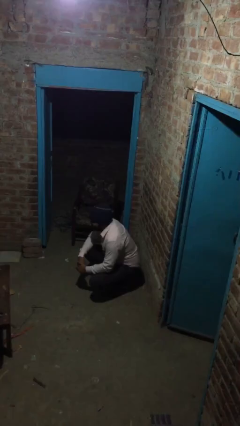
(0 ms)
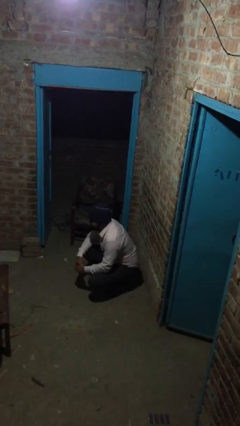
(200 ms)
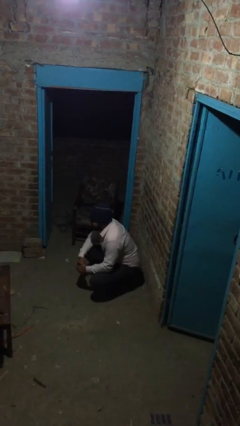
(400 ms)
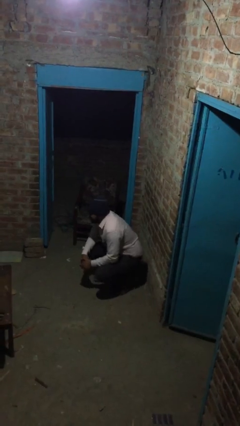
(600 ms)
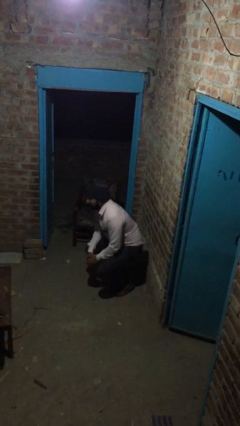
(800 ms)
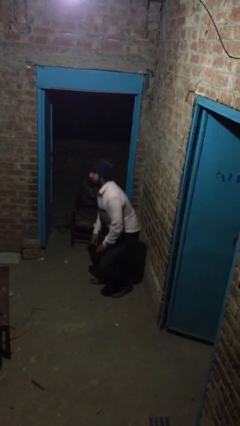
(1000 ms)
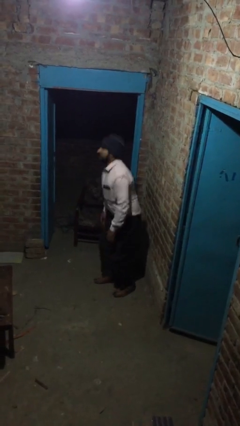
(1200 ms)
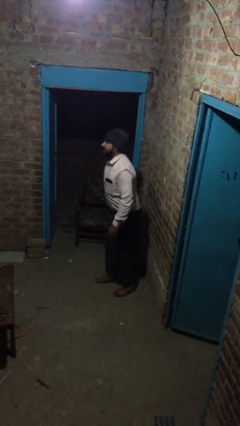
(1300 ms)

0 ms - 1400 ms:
person stands up

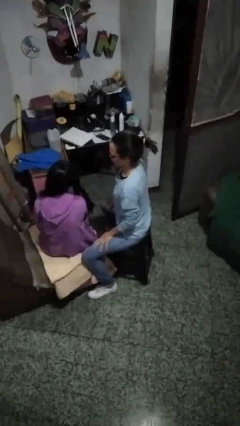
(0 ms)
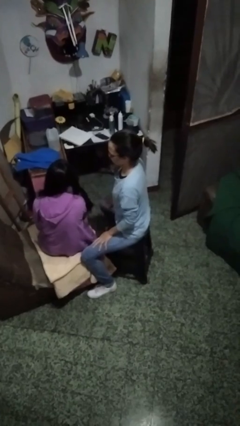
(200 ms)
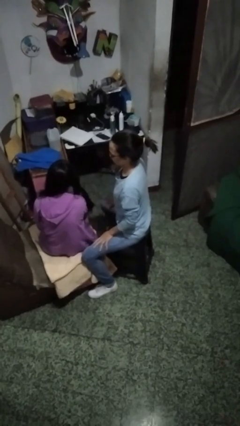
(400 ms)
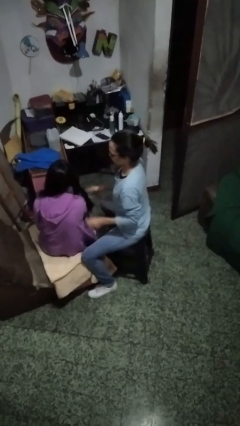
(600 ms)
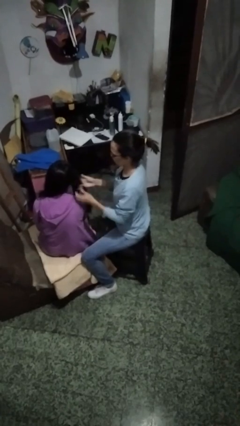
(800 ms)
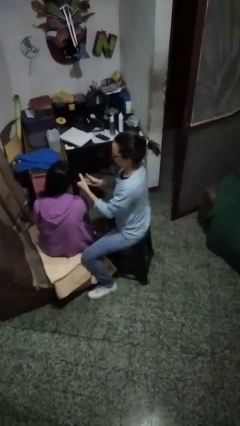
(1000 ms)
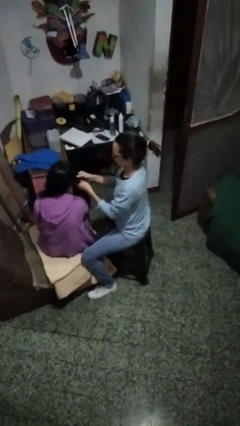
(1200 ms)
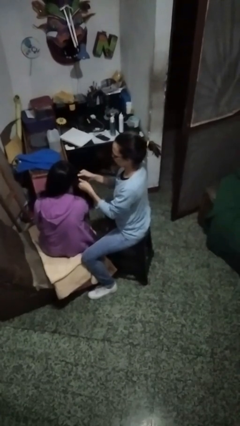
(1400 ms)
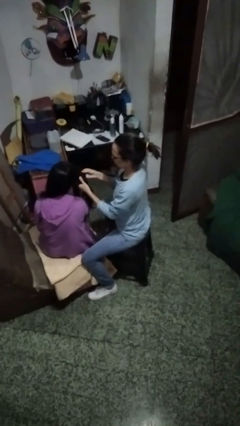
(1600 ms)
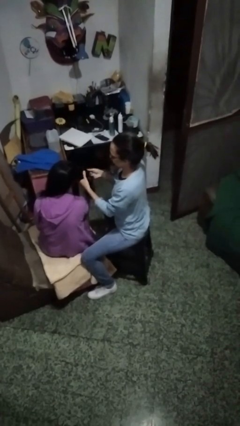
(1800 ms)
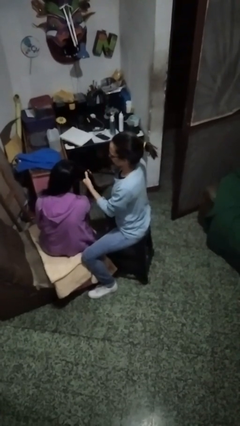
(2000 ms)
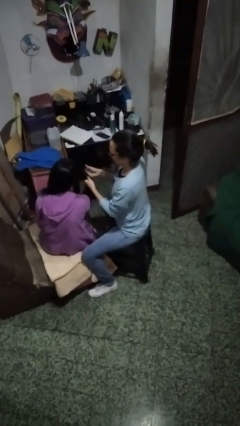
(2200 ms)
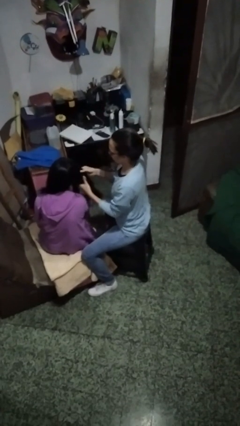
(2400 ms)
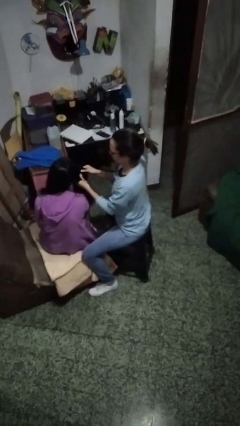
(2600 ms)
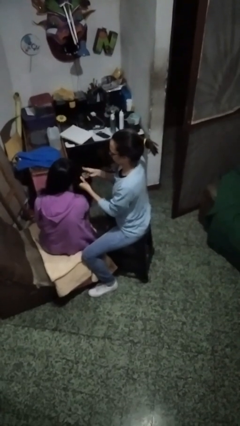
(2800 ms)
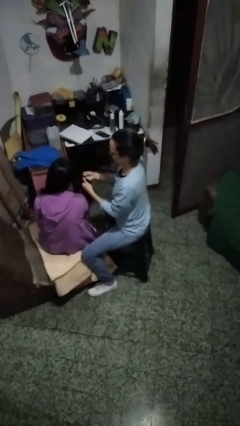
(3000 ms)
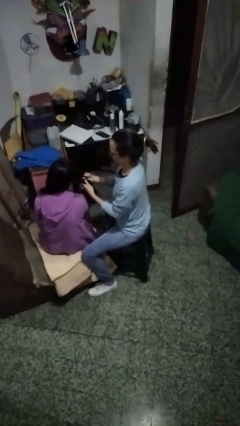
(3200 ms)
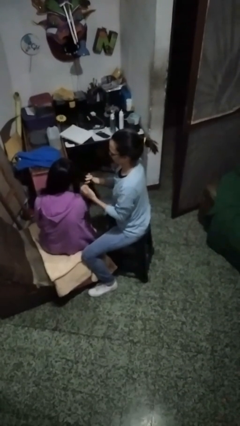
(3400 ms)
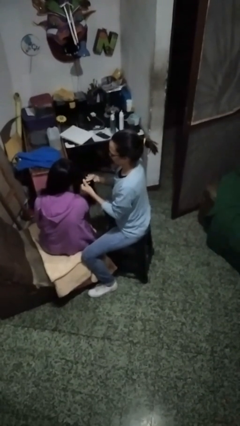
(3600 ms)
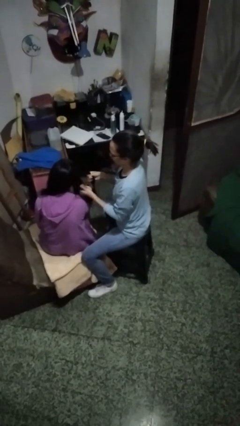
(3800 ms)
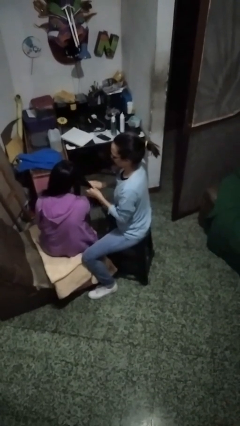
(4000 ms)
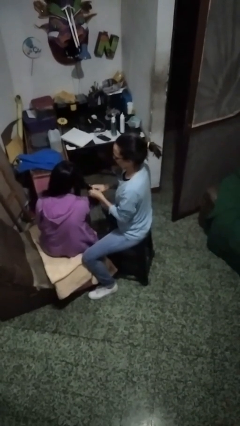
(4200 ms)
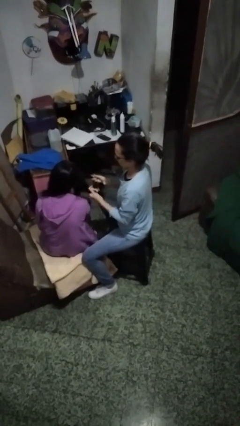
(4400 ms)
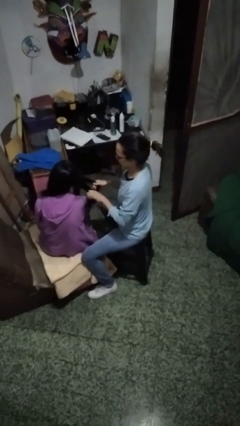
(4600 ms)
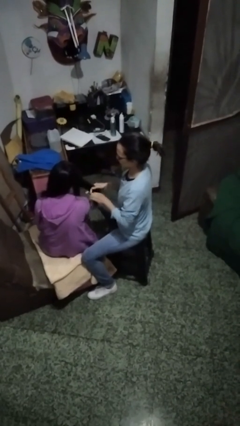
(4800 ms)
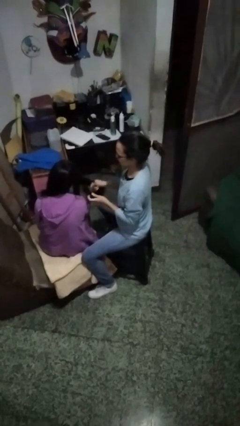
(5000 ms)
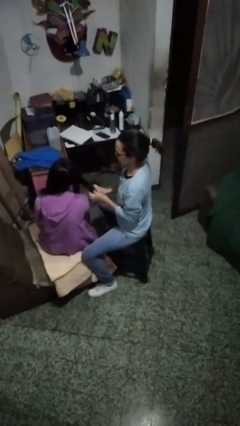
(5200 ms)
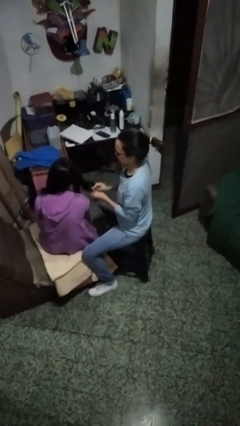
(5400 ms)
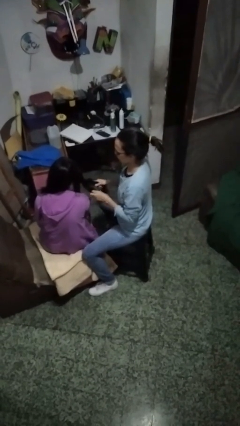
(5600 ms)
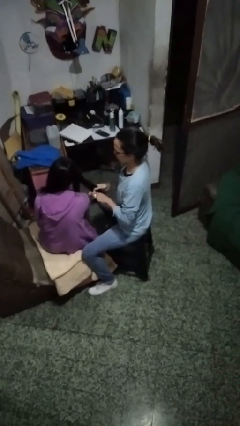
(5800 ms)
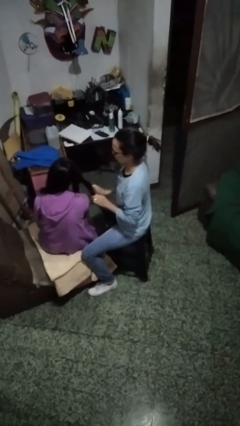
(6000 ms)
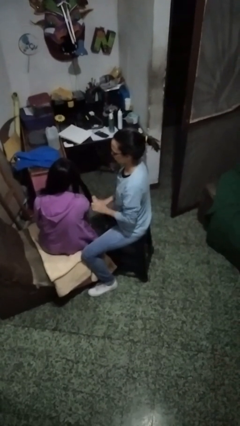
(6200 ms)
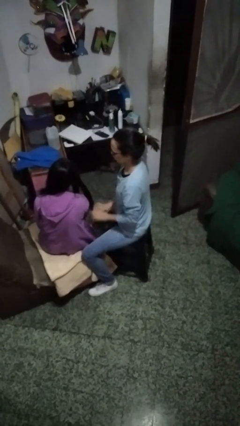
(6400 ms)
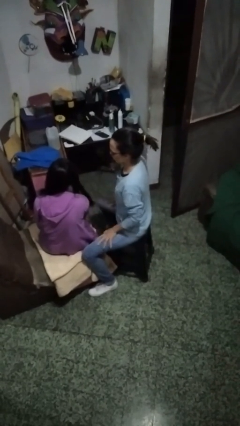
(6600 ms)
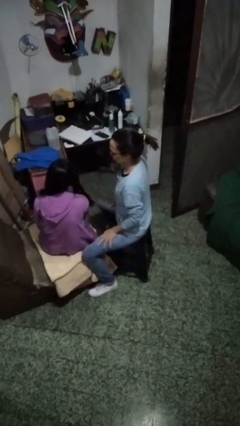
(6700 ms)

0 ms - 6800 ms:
person braids hair of person

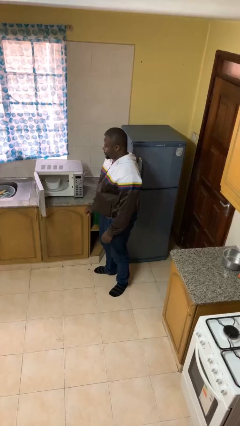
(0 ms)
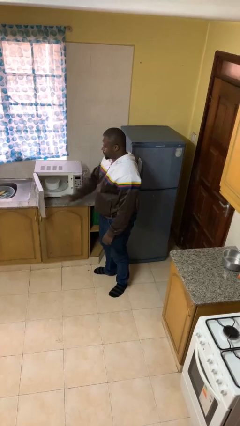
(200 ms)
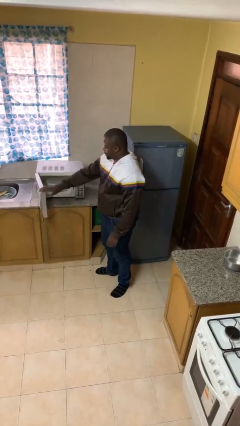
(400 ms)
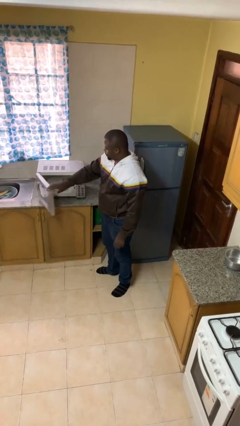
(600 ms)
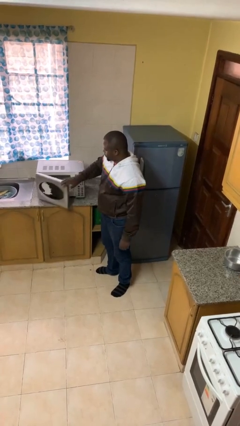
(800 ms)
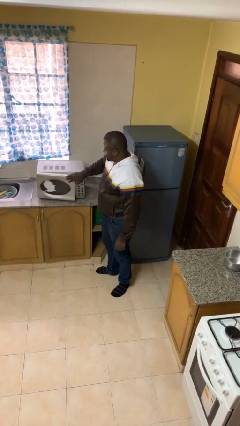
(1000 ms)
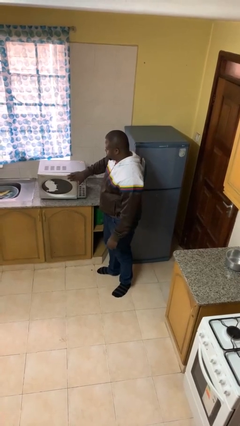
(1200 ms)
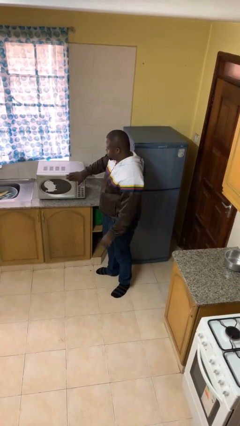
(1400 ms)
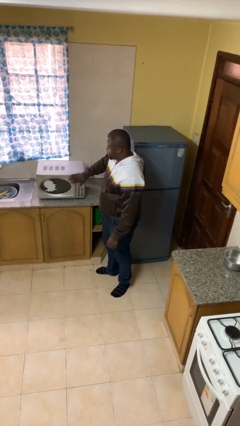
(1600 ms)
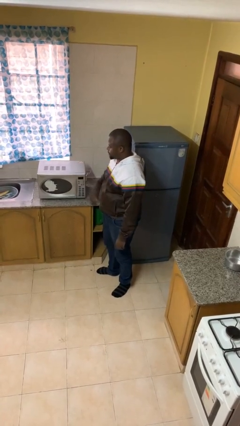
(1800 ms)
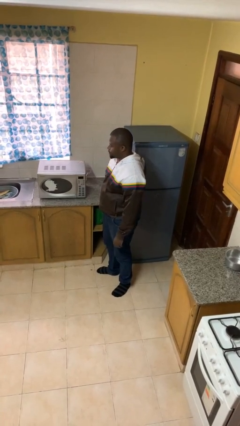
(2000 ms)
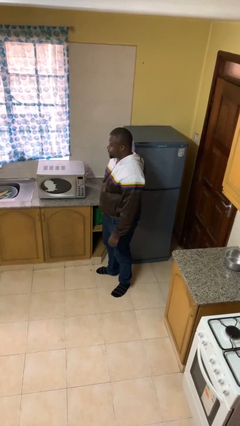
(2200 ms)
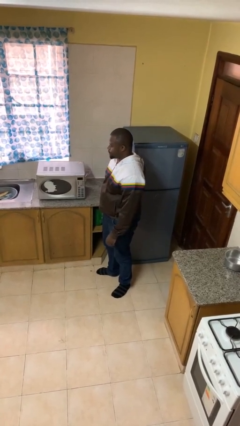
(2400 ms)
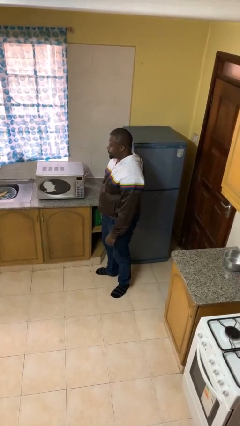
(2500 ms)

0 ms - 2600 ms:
person closes microwave

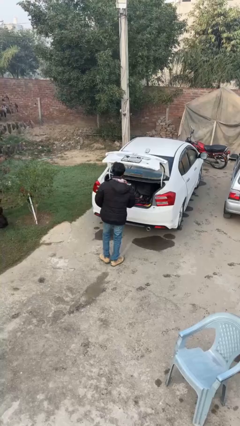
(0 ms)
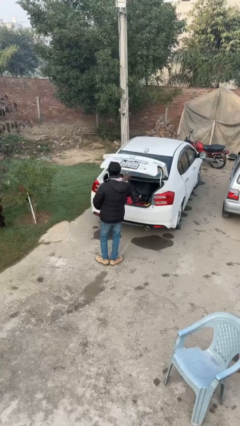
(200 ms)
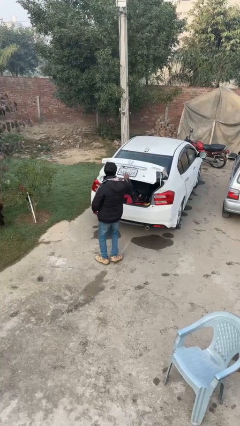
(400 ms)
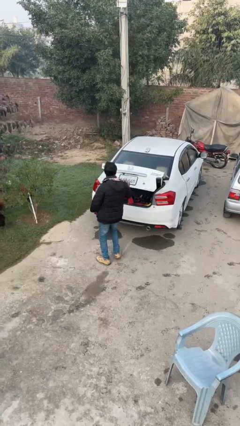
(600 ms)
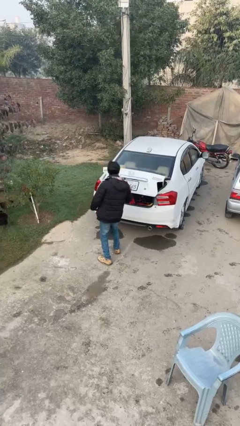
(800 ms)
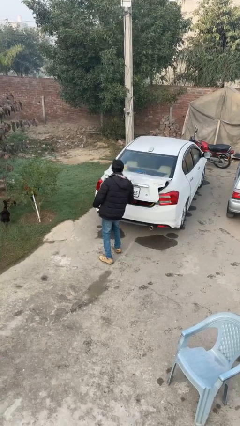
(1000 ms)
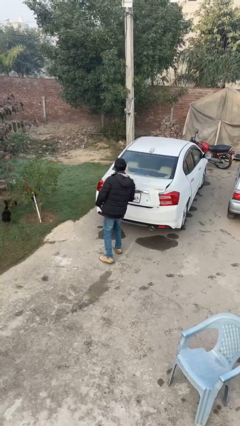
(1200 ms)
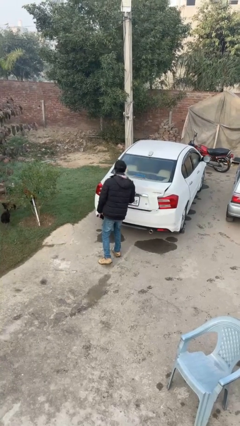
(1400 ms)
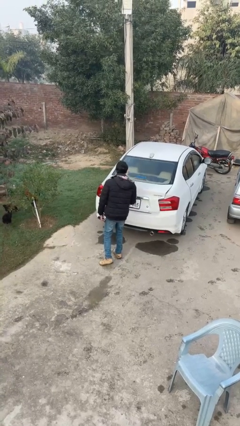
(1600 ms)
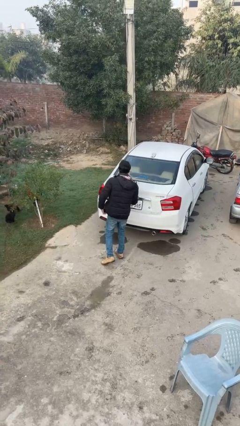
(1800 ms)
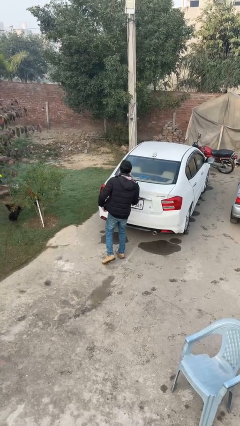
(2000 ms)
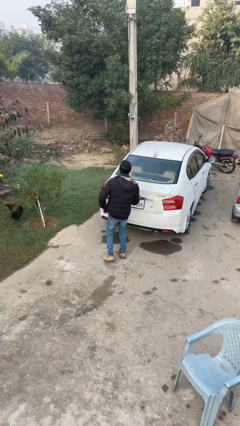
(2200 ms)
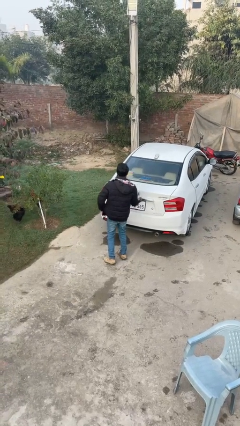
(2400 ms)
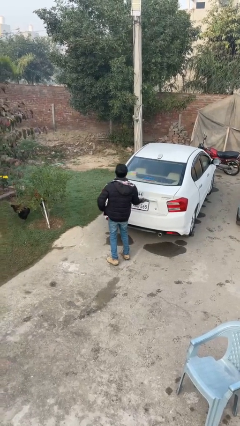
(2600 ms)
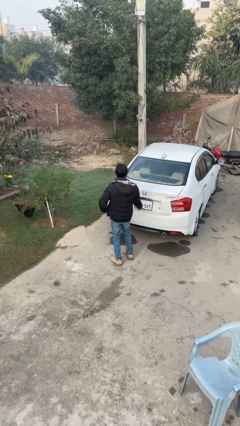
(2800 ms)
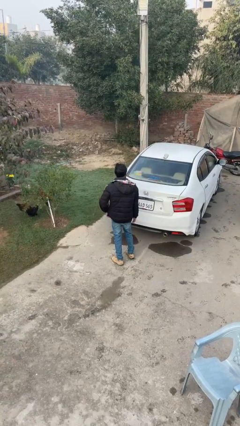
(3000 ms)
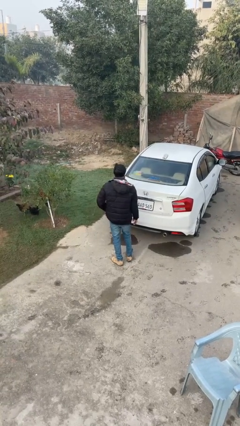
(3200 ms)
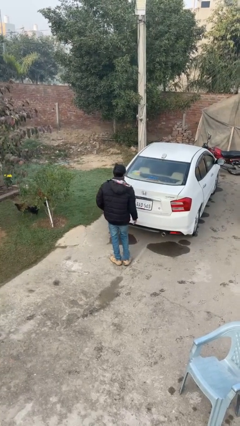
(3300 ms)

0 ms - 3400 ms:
person closes car trunk

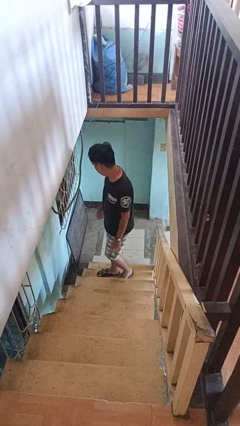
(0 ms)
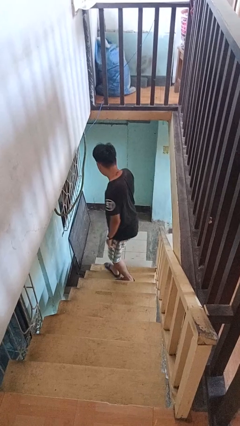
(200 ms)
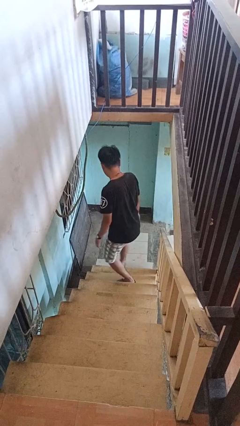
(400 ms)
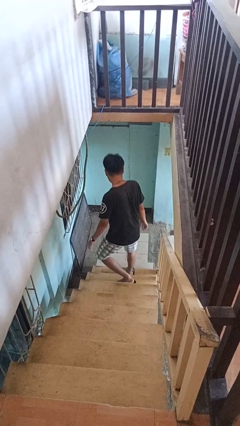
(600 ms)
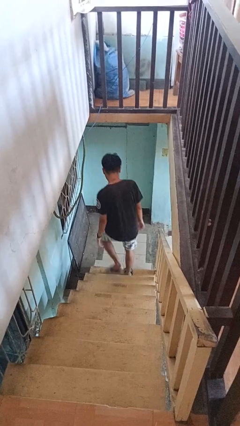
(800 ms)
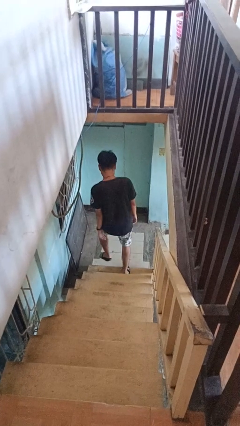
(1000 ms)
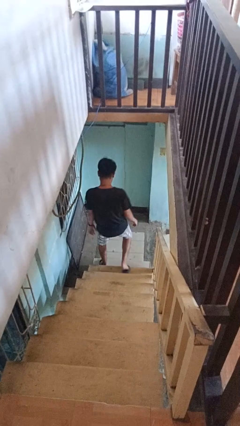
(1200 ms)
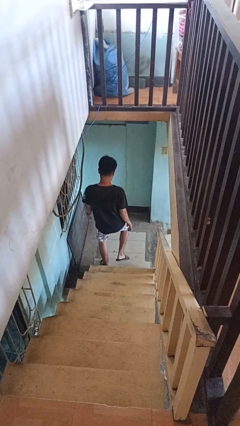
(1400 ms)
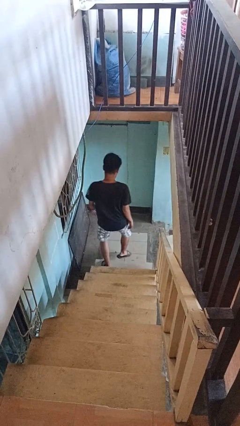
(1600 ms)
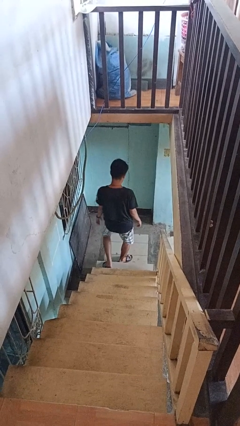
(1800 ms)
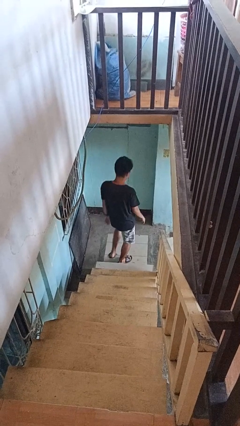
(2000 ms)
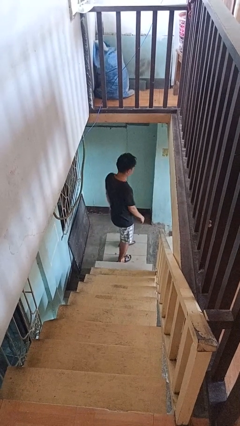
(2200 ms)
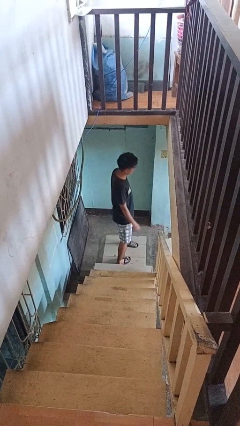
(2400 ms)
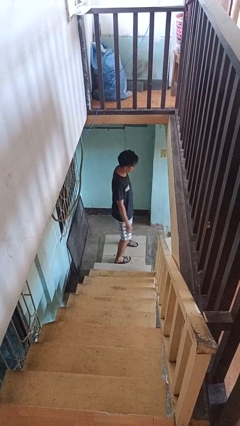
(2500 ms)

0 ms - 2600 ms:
person climbs down ladder

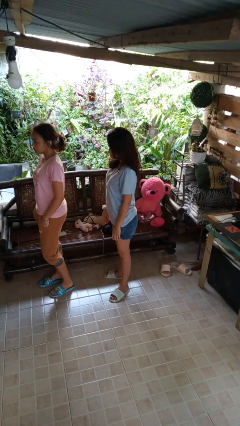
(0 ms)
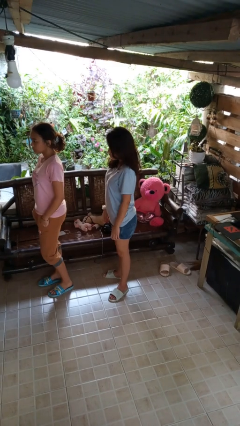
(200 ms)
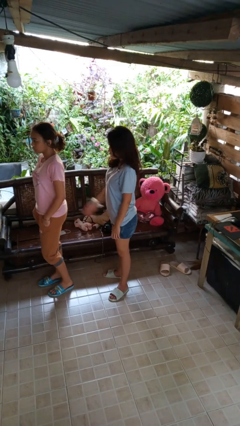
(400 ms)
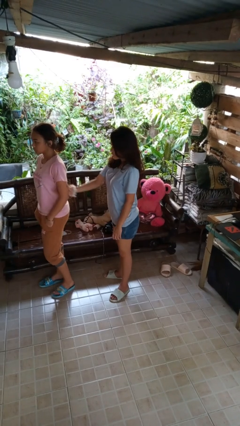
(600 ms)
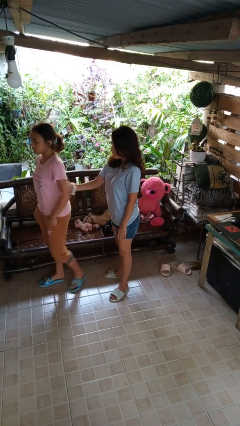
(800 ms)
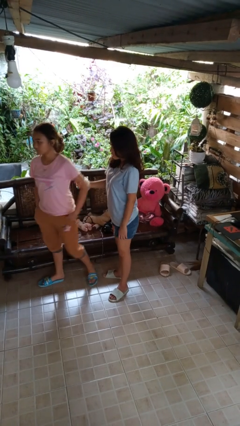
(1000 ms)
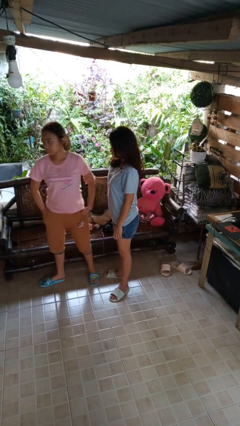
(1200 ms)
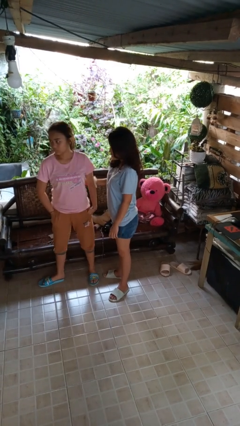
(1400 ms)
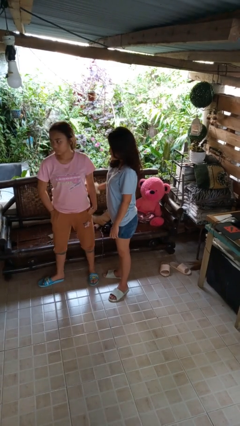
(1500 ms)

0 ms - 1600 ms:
person grabs person by bicep
